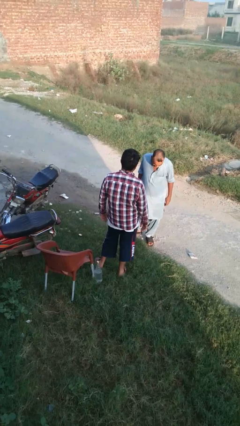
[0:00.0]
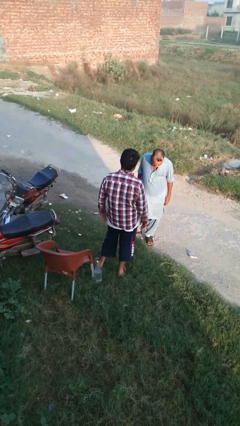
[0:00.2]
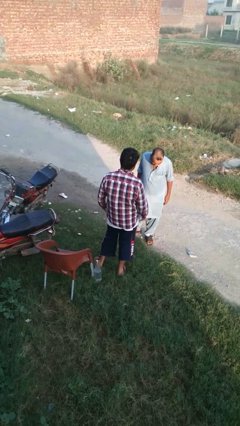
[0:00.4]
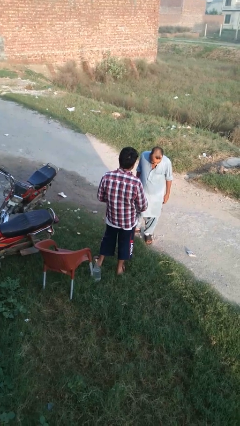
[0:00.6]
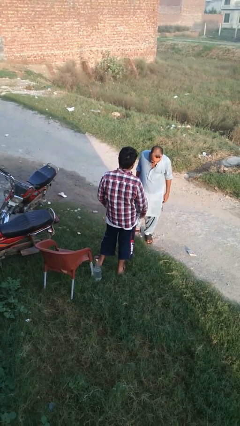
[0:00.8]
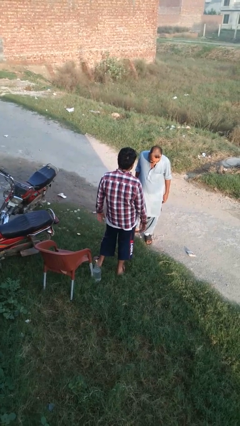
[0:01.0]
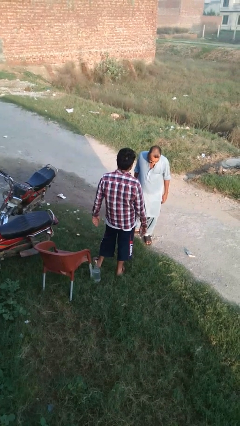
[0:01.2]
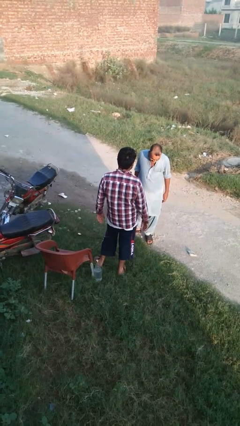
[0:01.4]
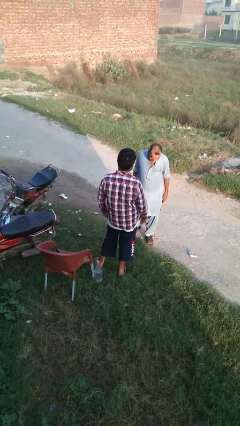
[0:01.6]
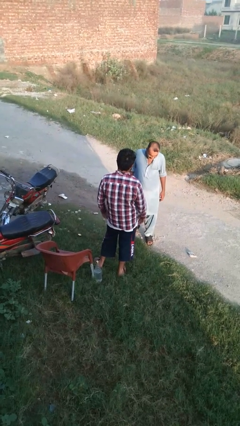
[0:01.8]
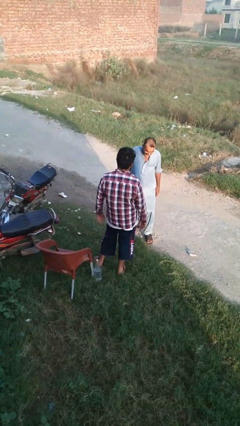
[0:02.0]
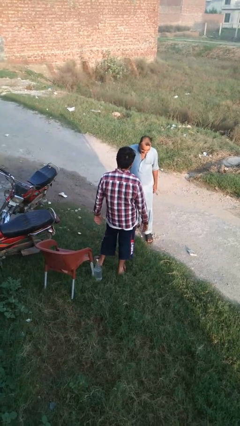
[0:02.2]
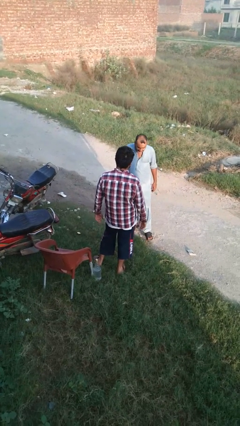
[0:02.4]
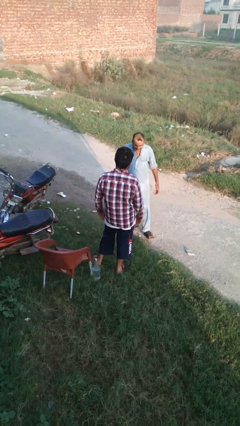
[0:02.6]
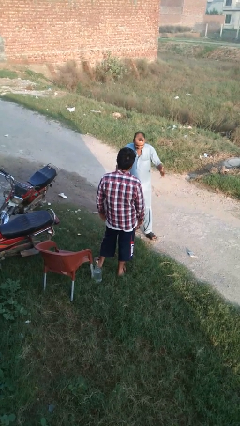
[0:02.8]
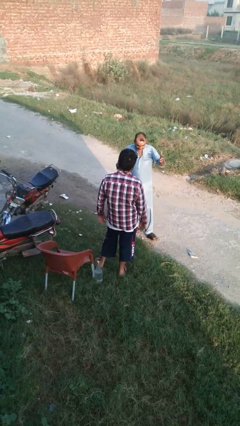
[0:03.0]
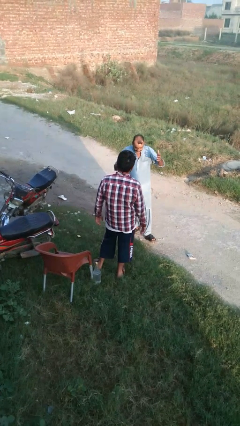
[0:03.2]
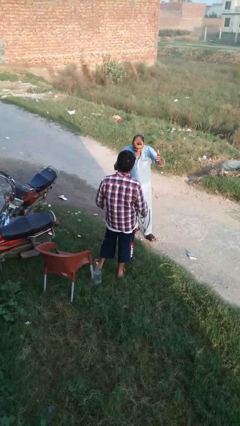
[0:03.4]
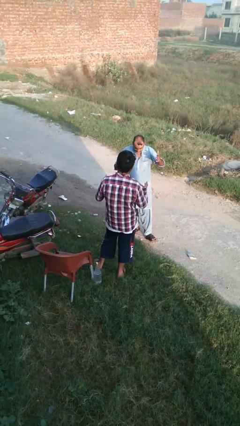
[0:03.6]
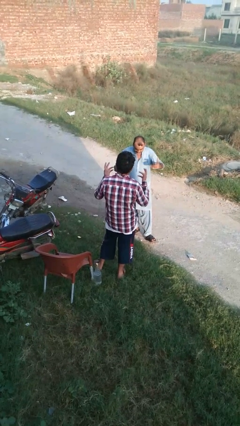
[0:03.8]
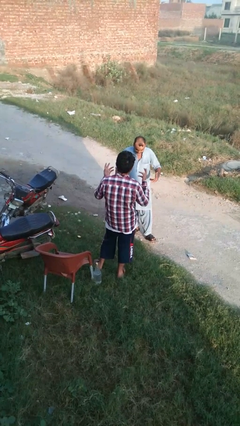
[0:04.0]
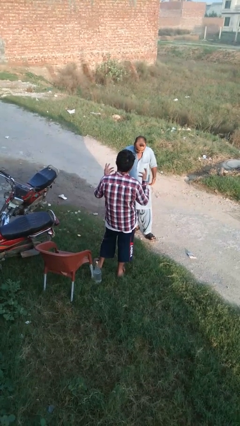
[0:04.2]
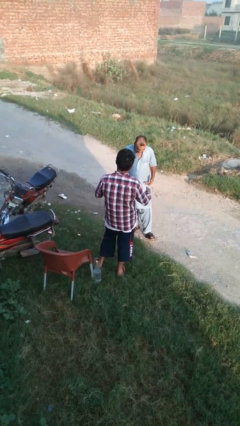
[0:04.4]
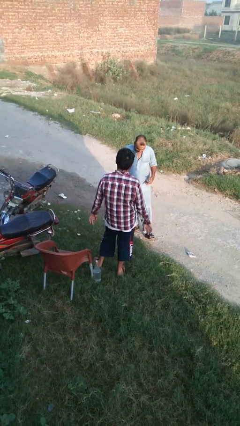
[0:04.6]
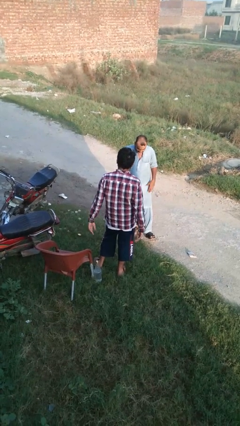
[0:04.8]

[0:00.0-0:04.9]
person laughs with person

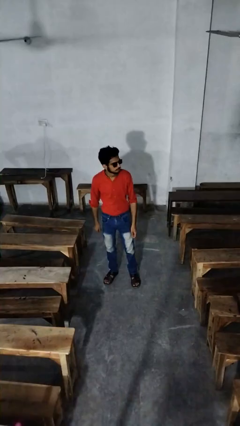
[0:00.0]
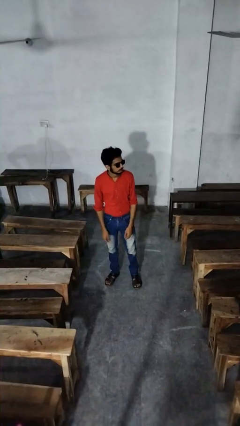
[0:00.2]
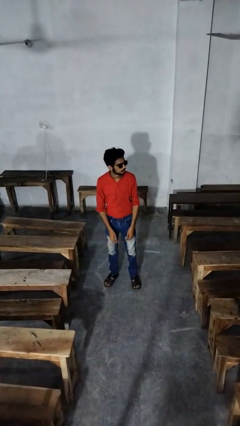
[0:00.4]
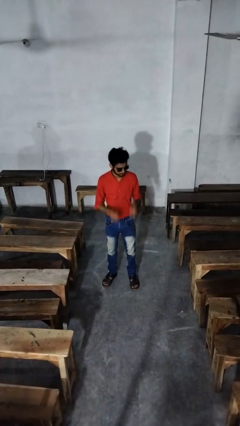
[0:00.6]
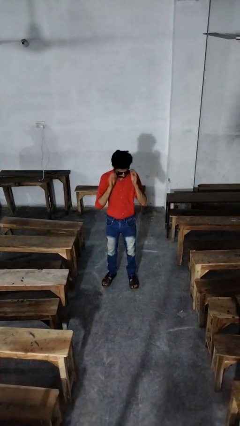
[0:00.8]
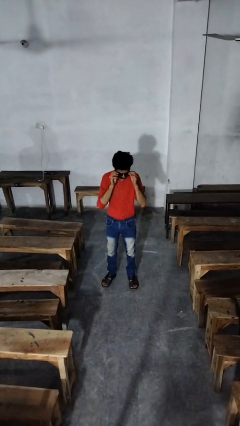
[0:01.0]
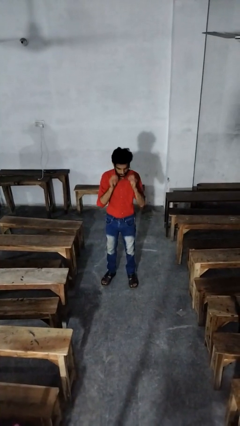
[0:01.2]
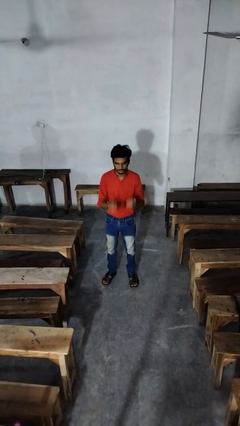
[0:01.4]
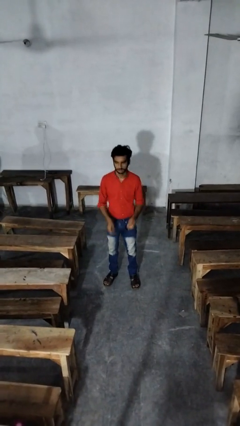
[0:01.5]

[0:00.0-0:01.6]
person takes off sunglasses

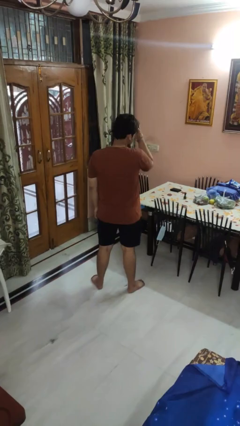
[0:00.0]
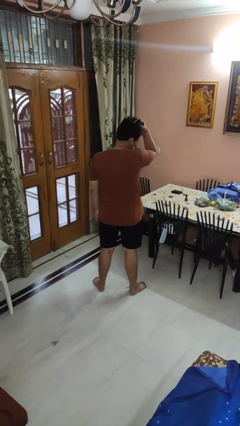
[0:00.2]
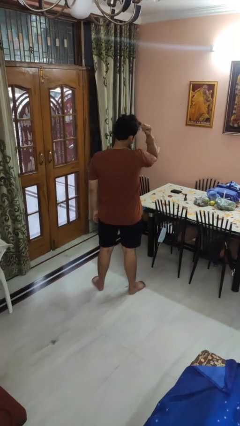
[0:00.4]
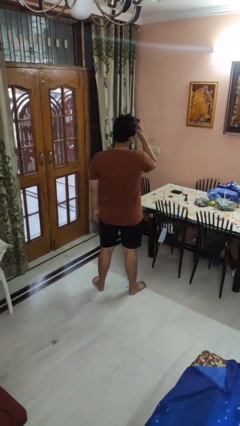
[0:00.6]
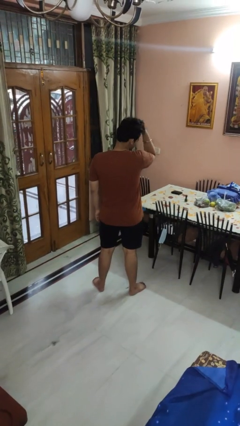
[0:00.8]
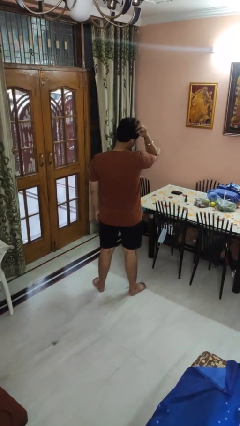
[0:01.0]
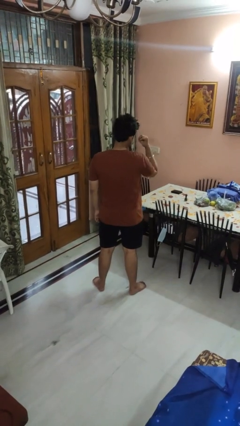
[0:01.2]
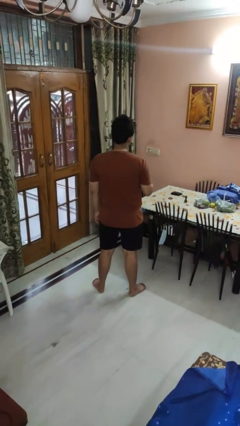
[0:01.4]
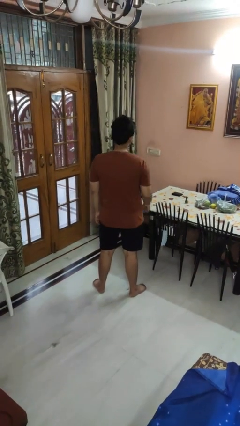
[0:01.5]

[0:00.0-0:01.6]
person strokes hair

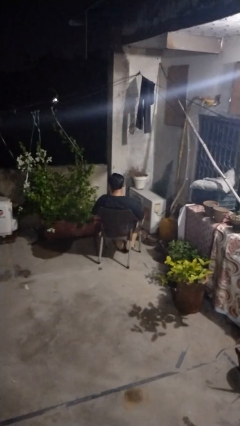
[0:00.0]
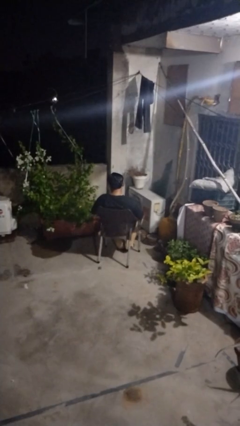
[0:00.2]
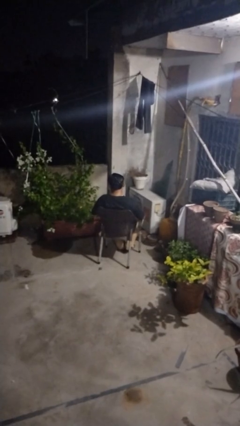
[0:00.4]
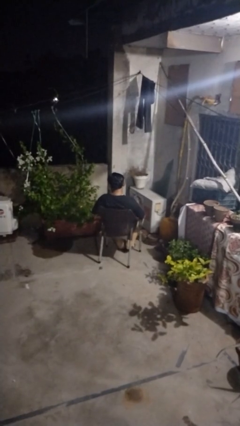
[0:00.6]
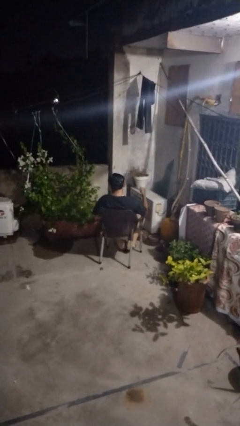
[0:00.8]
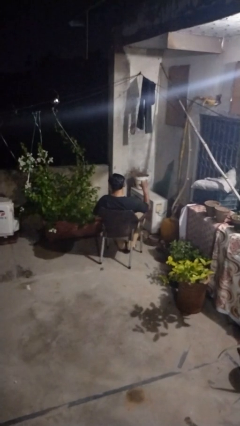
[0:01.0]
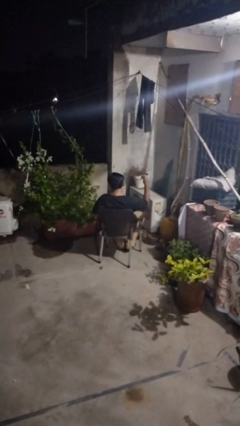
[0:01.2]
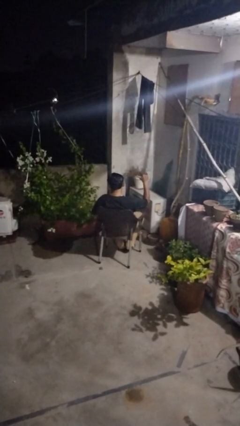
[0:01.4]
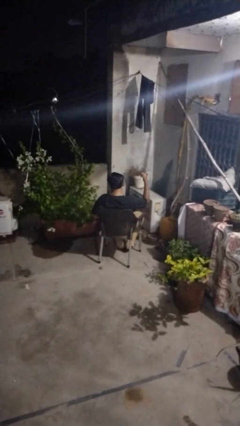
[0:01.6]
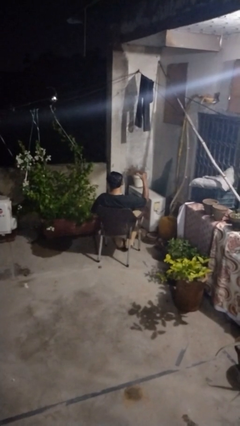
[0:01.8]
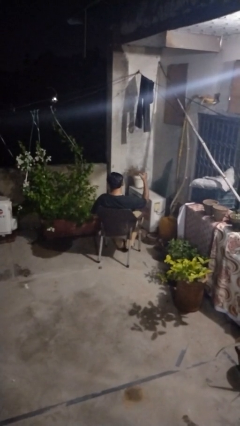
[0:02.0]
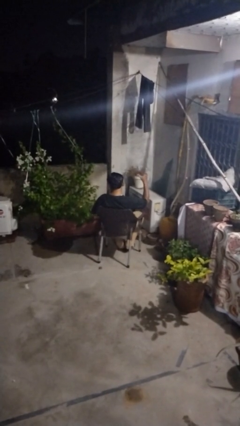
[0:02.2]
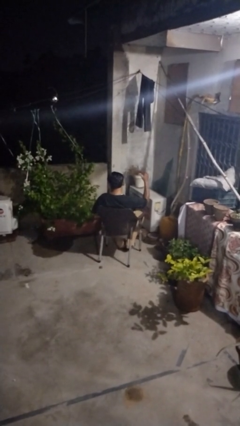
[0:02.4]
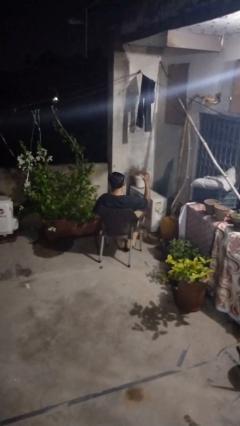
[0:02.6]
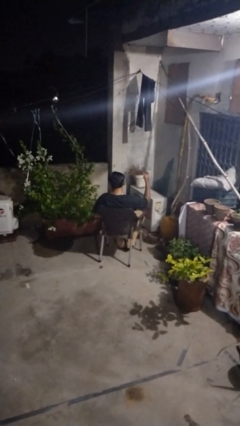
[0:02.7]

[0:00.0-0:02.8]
person gestures hang loose

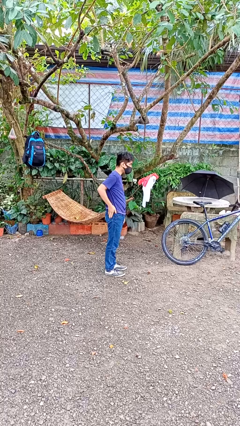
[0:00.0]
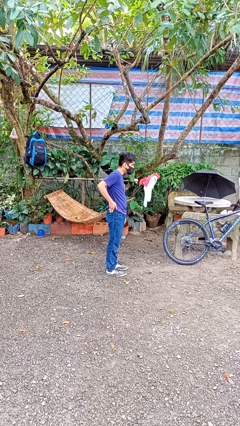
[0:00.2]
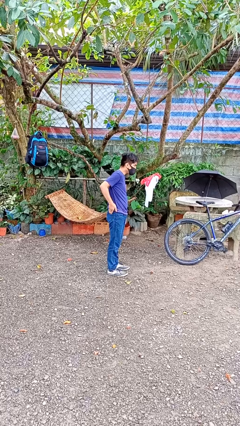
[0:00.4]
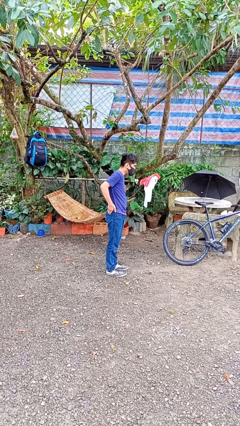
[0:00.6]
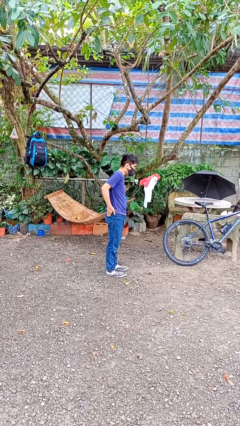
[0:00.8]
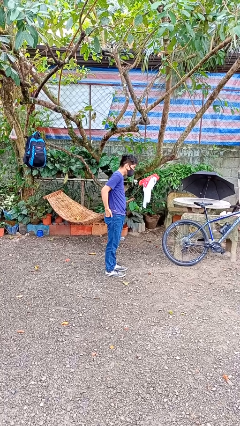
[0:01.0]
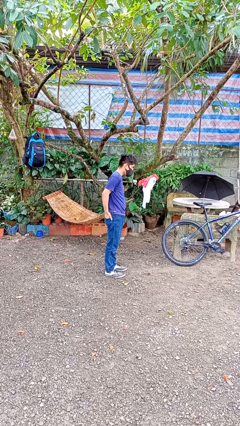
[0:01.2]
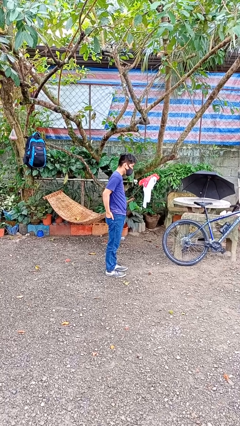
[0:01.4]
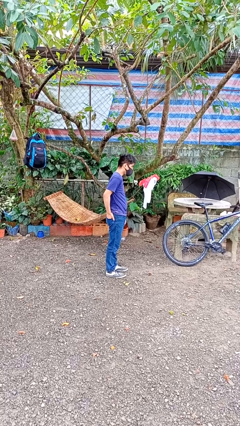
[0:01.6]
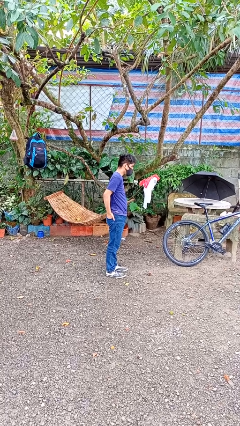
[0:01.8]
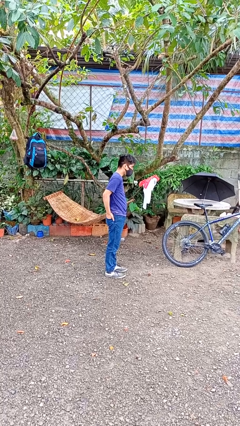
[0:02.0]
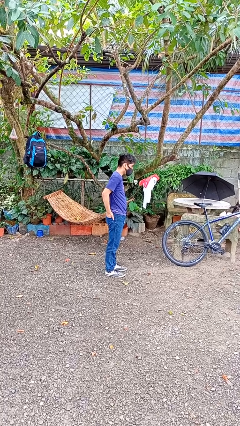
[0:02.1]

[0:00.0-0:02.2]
person puts hands in back pockets

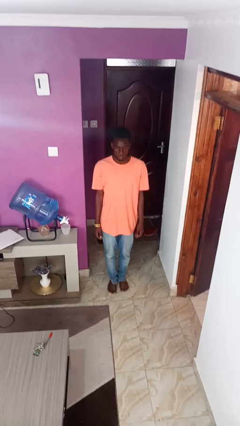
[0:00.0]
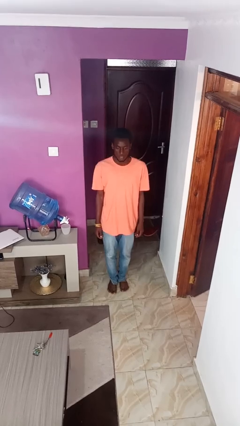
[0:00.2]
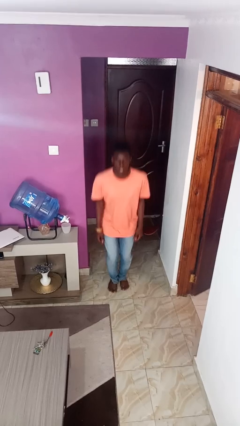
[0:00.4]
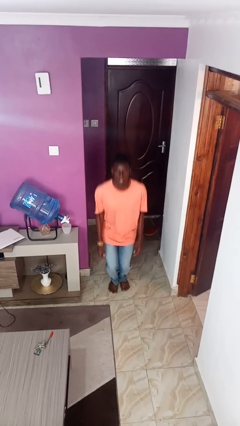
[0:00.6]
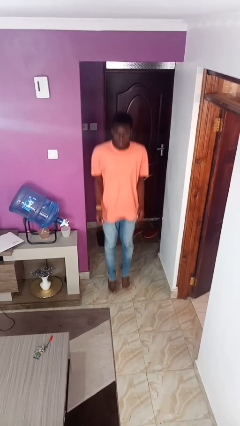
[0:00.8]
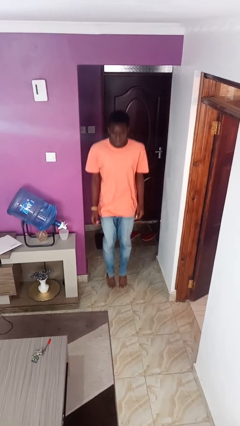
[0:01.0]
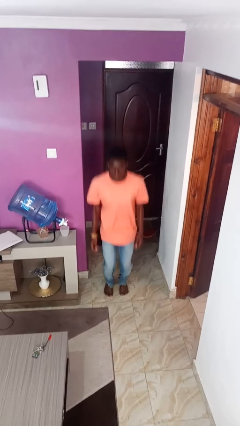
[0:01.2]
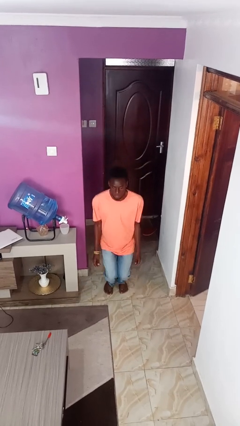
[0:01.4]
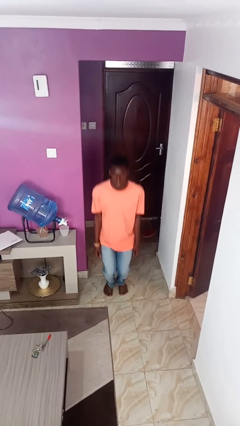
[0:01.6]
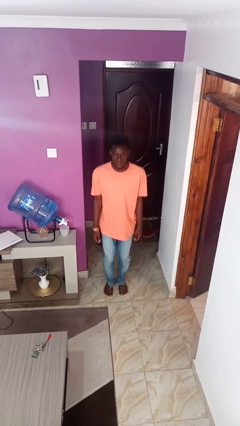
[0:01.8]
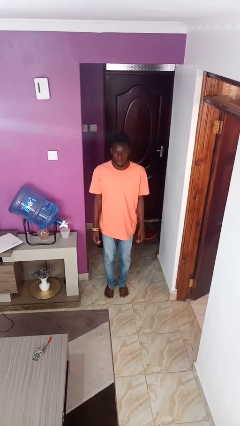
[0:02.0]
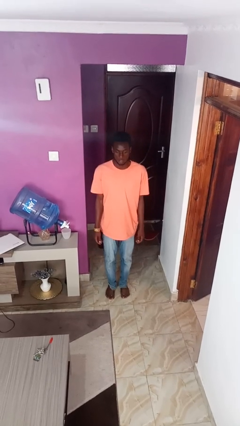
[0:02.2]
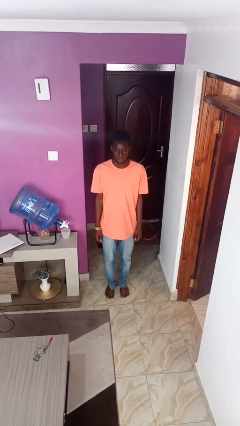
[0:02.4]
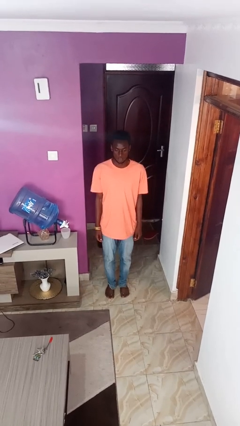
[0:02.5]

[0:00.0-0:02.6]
person jumps

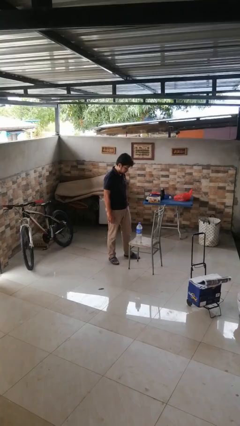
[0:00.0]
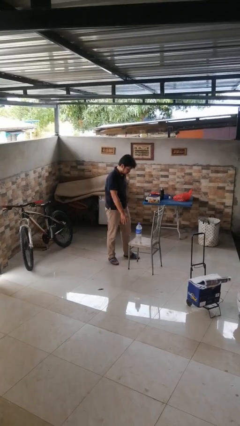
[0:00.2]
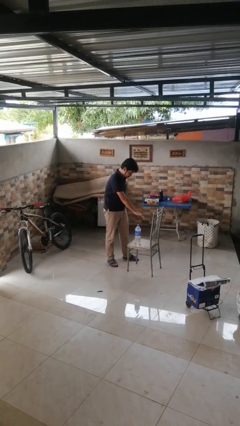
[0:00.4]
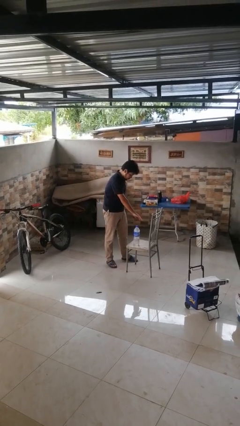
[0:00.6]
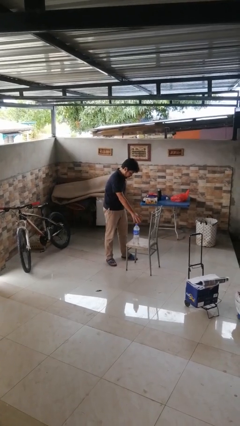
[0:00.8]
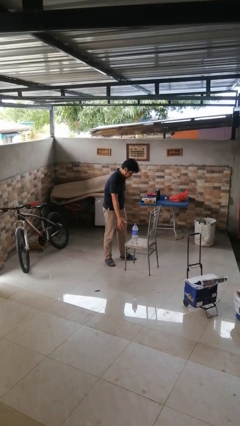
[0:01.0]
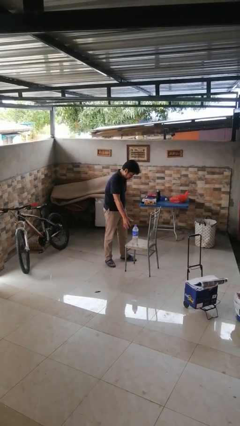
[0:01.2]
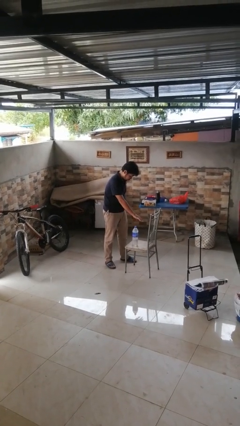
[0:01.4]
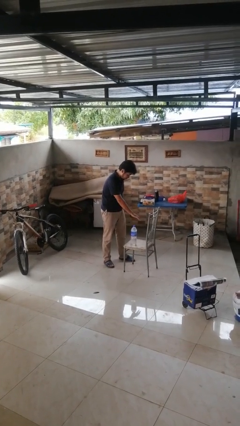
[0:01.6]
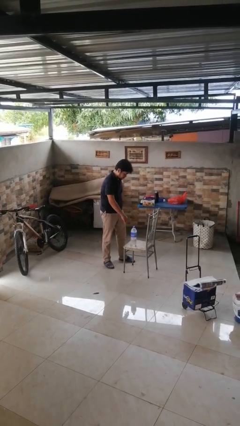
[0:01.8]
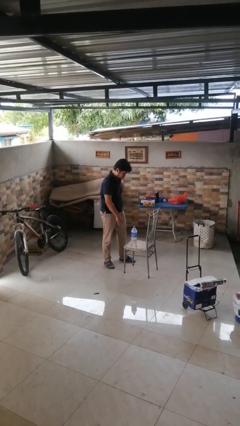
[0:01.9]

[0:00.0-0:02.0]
person waves hand over object
